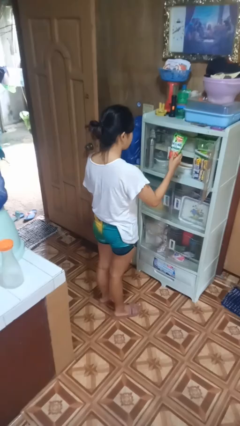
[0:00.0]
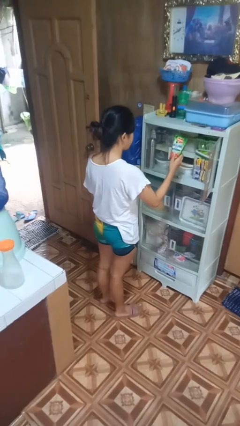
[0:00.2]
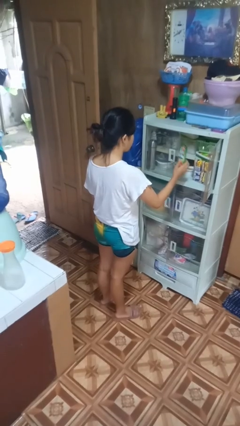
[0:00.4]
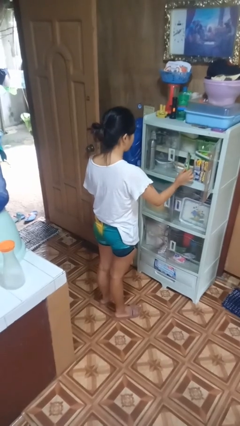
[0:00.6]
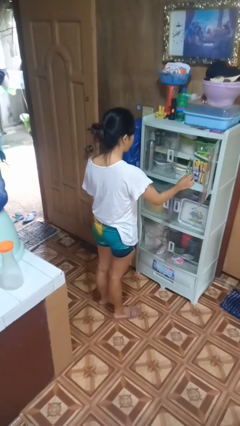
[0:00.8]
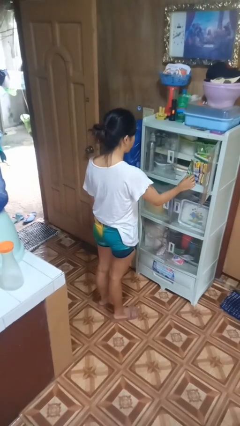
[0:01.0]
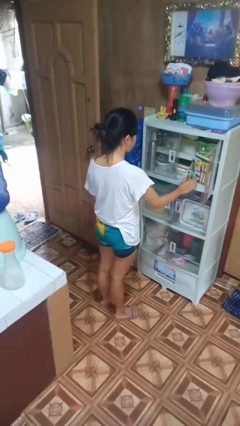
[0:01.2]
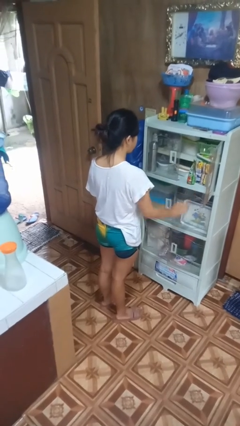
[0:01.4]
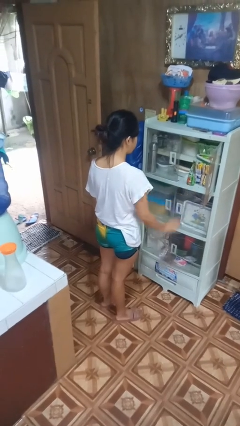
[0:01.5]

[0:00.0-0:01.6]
person puts down object into cabinet

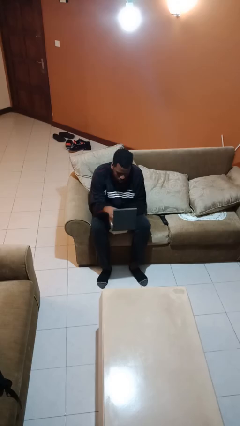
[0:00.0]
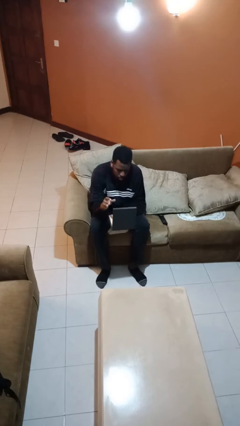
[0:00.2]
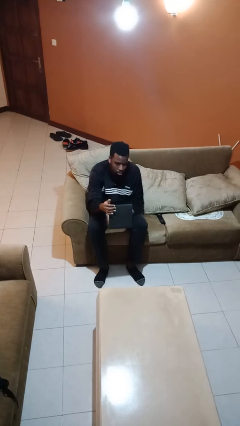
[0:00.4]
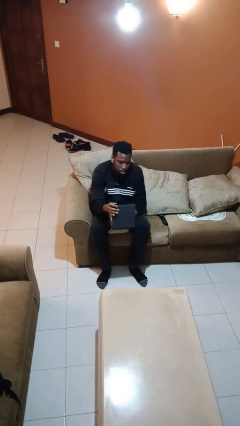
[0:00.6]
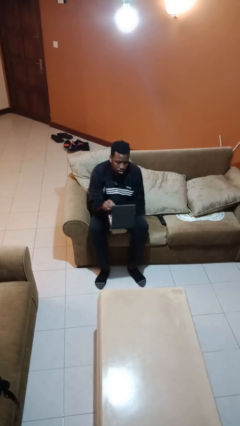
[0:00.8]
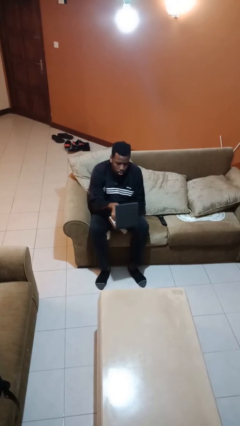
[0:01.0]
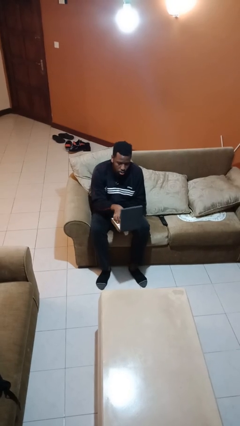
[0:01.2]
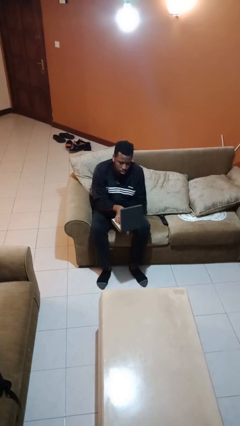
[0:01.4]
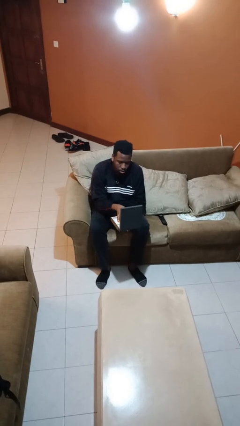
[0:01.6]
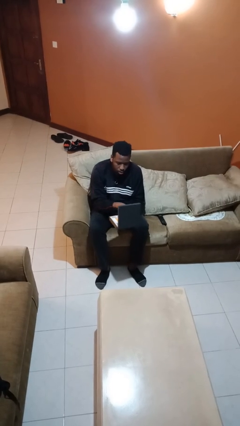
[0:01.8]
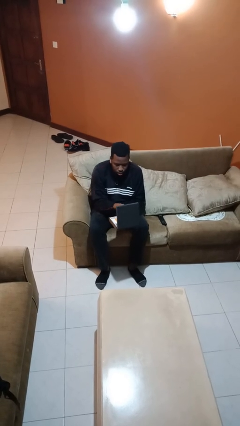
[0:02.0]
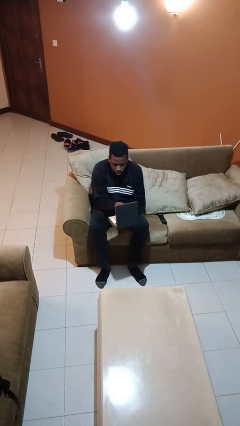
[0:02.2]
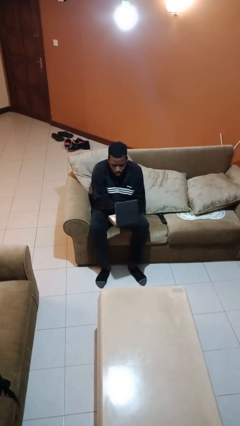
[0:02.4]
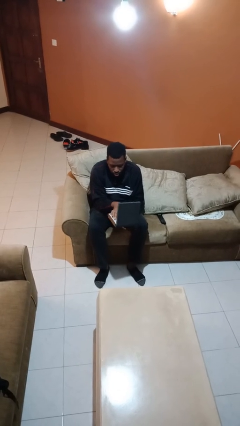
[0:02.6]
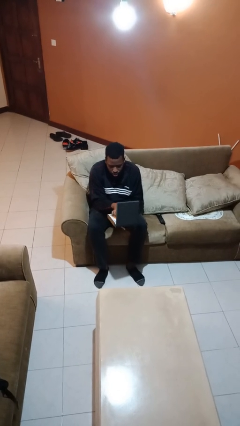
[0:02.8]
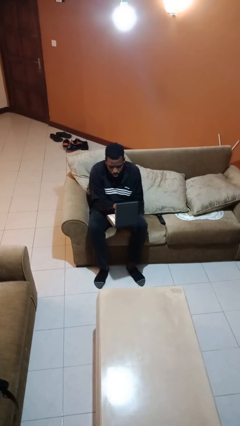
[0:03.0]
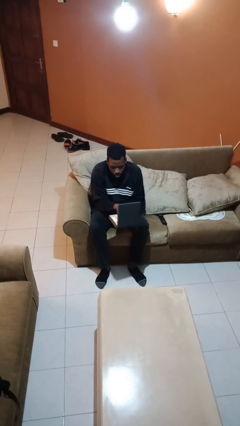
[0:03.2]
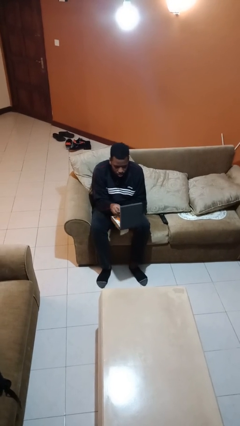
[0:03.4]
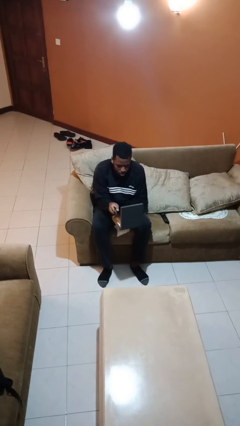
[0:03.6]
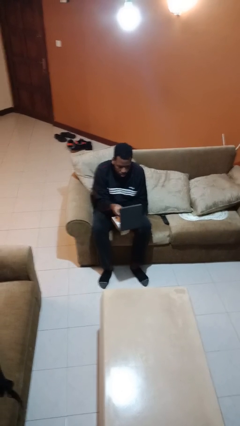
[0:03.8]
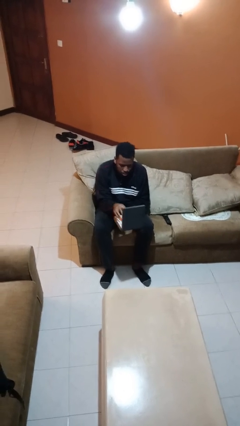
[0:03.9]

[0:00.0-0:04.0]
person searches jewelry box

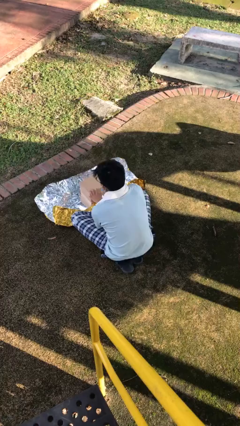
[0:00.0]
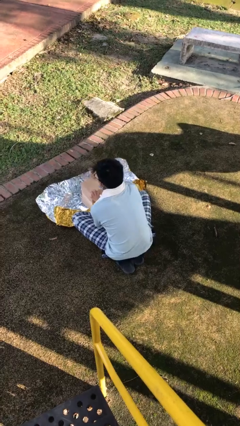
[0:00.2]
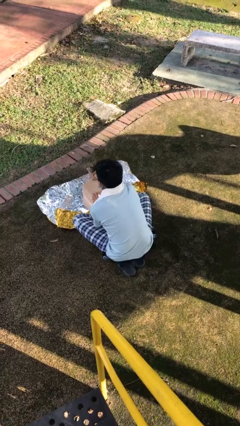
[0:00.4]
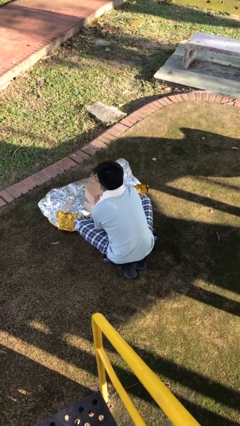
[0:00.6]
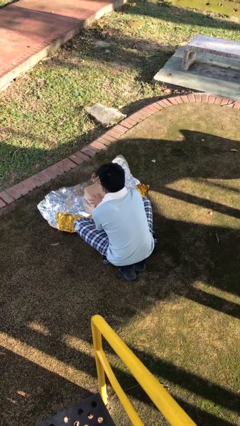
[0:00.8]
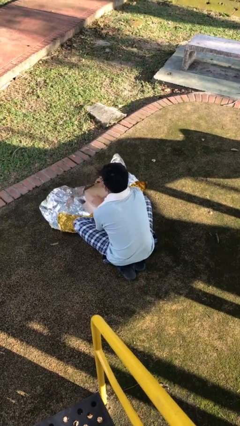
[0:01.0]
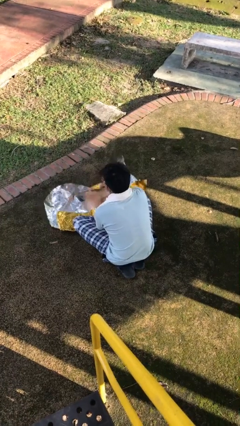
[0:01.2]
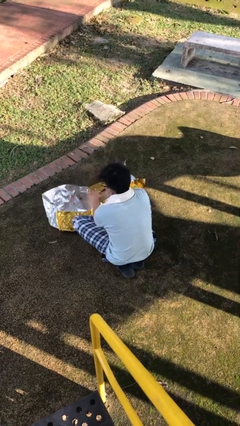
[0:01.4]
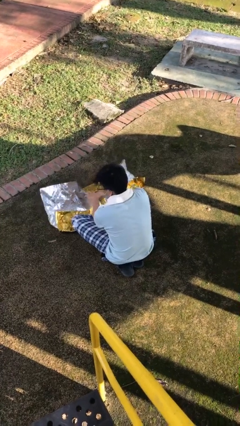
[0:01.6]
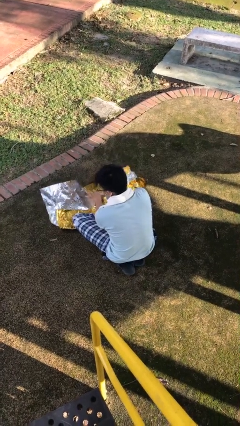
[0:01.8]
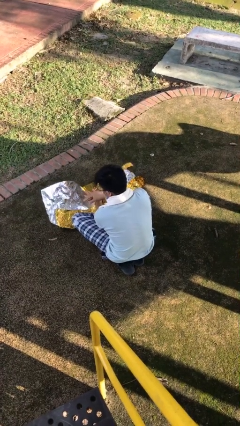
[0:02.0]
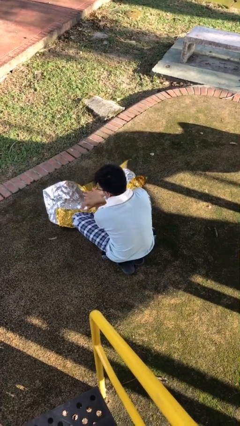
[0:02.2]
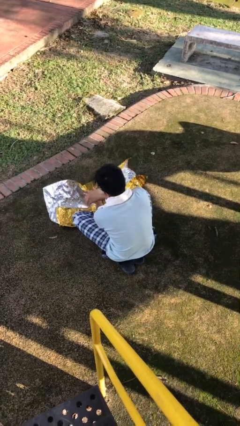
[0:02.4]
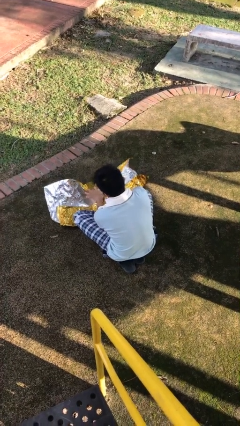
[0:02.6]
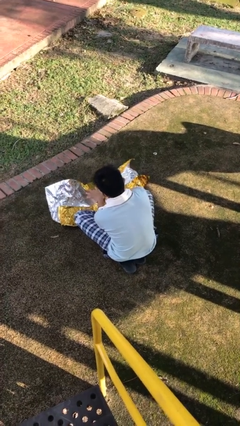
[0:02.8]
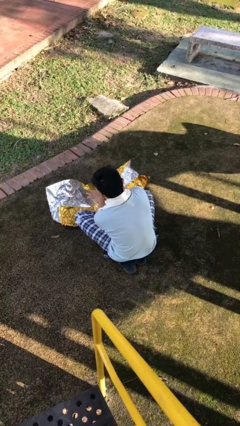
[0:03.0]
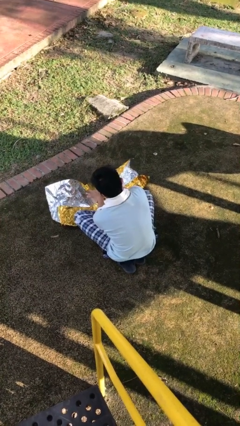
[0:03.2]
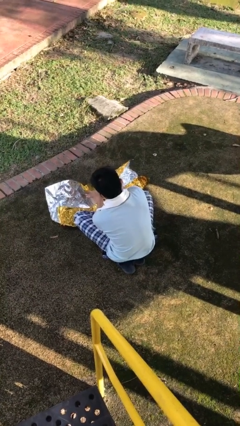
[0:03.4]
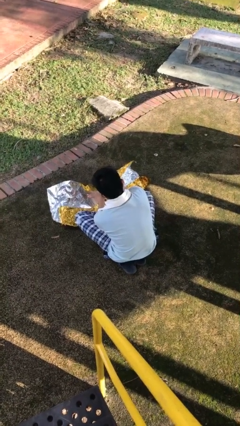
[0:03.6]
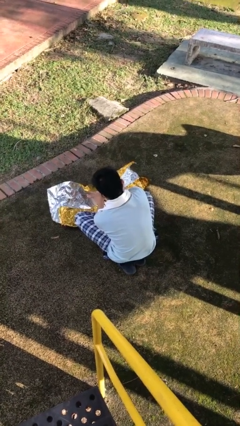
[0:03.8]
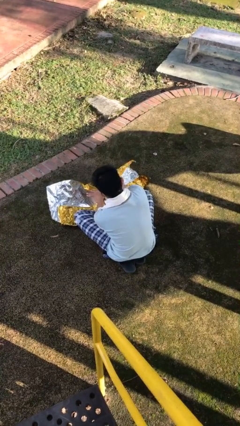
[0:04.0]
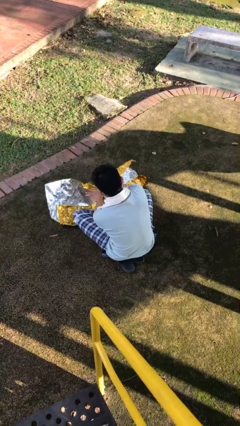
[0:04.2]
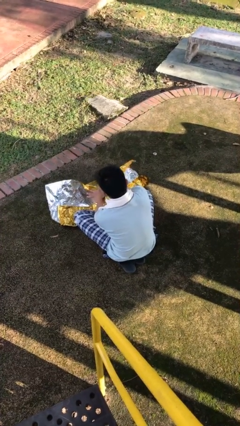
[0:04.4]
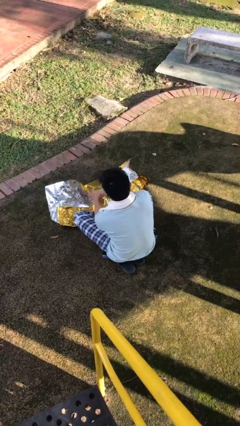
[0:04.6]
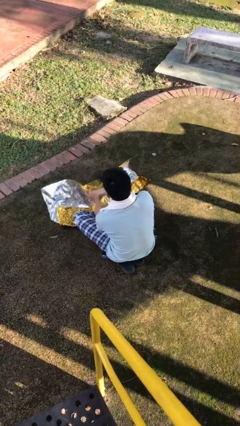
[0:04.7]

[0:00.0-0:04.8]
person wraps box

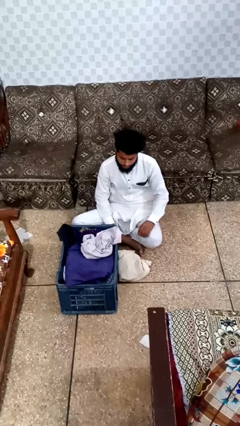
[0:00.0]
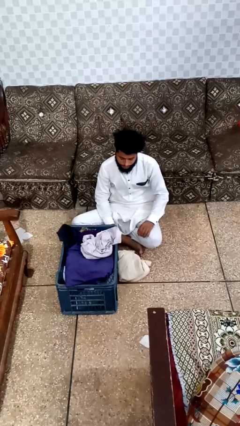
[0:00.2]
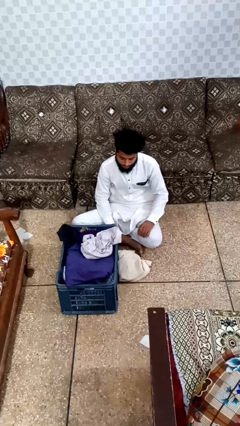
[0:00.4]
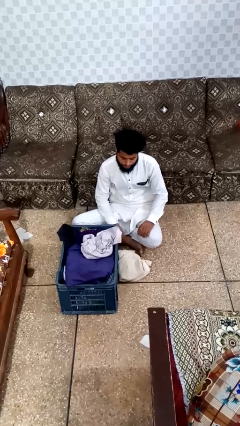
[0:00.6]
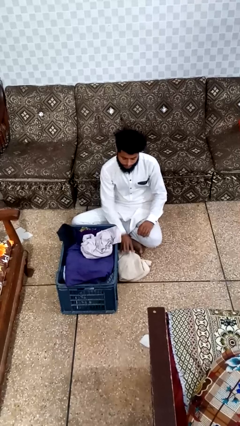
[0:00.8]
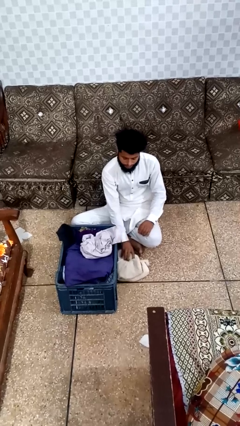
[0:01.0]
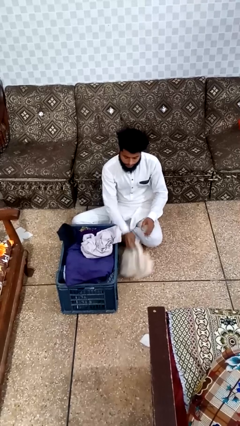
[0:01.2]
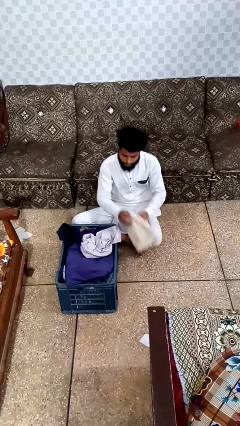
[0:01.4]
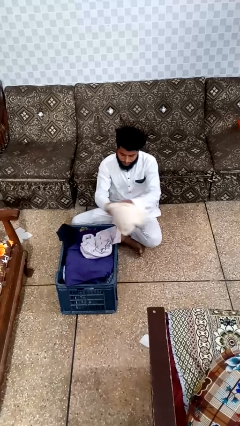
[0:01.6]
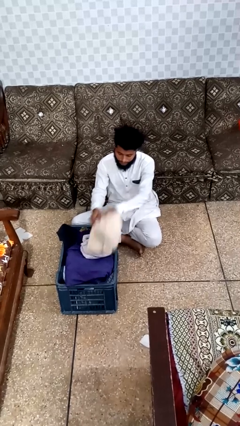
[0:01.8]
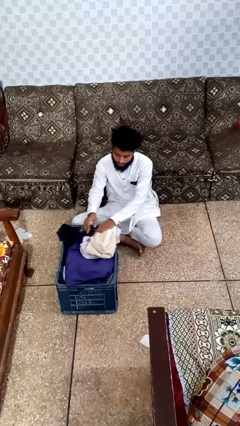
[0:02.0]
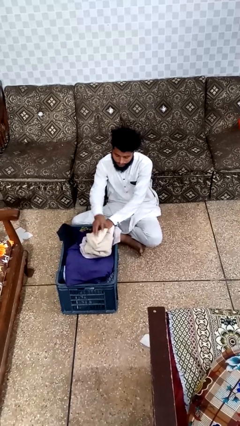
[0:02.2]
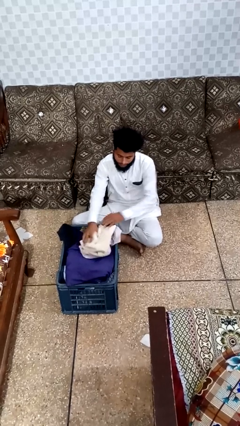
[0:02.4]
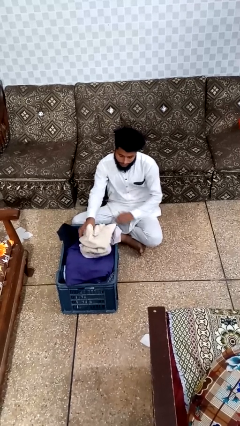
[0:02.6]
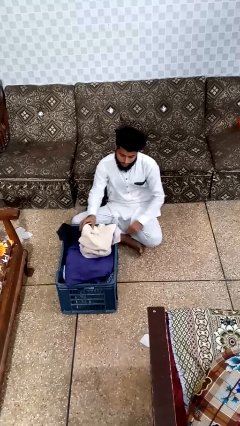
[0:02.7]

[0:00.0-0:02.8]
person takes object from basket

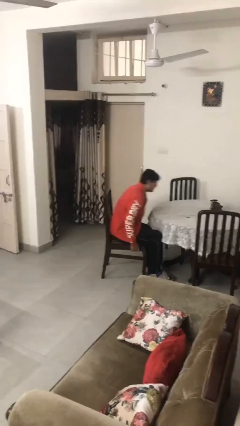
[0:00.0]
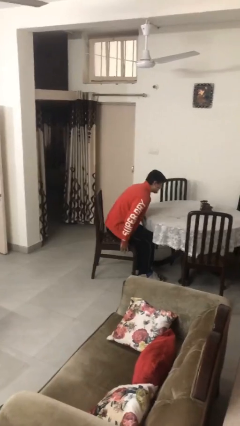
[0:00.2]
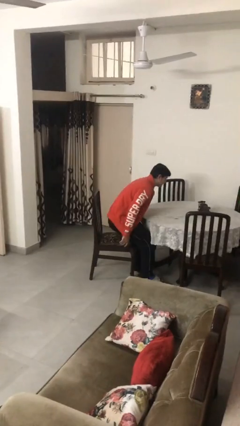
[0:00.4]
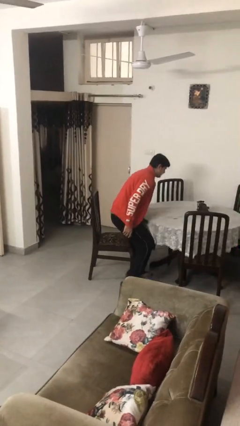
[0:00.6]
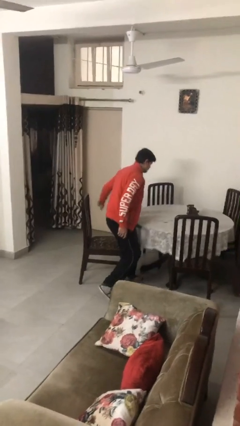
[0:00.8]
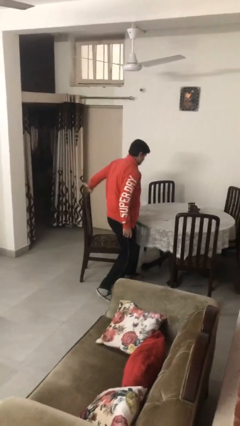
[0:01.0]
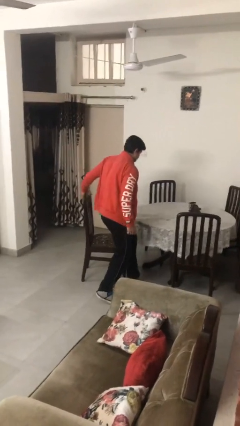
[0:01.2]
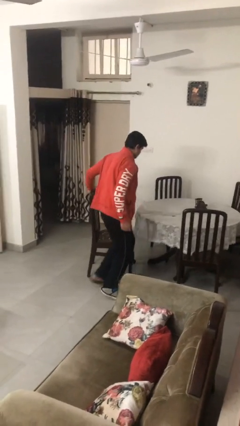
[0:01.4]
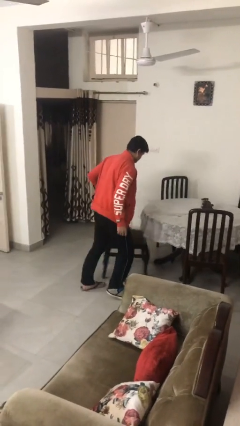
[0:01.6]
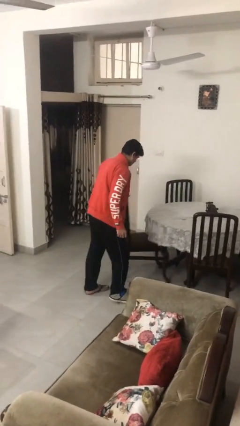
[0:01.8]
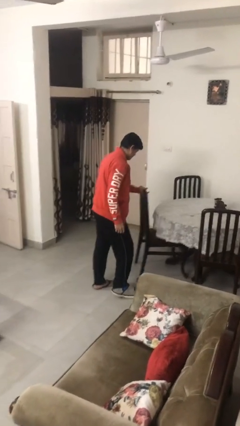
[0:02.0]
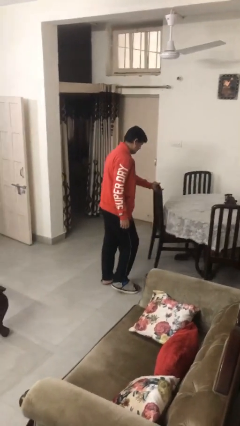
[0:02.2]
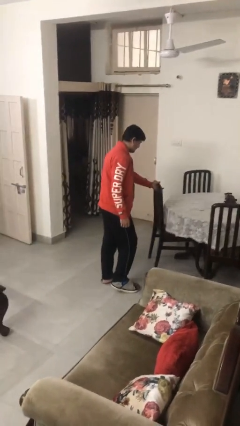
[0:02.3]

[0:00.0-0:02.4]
person stands up

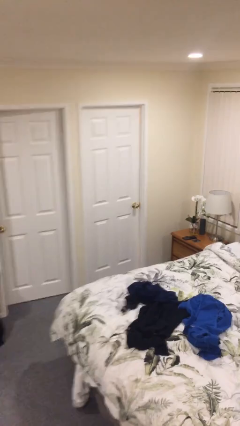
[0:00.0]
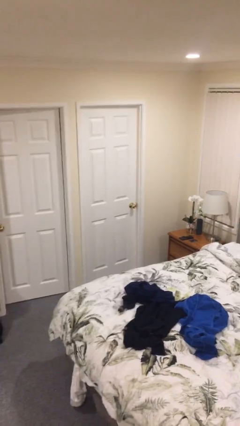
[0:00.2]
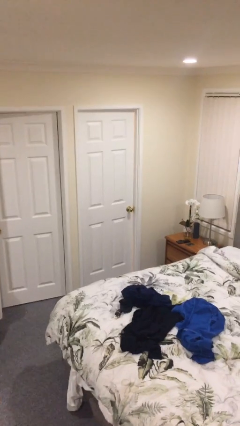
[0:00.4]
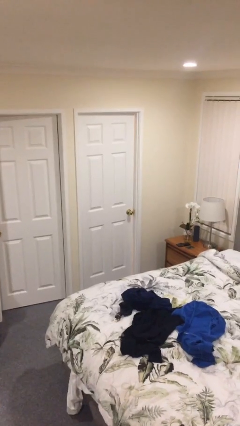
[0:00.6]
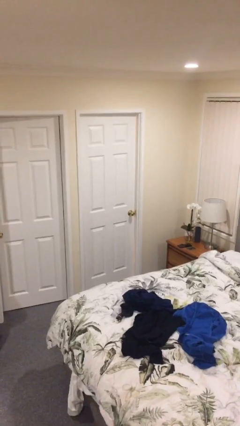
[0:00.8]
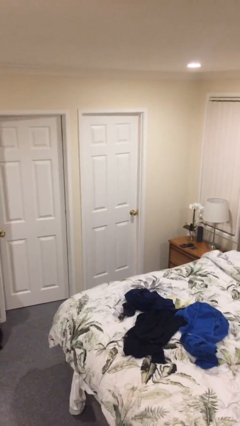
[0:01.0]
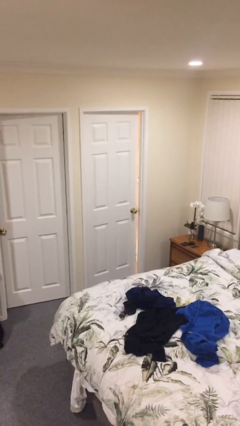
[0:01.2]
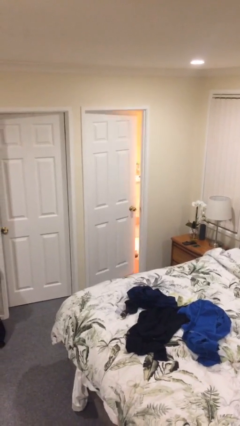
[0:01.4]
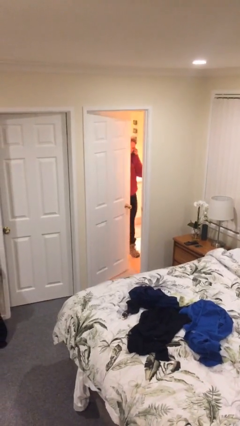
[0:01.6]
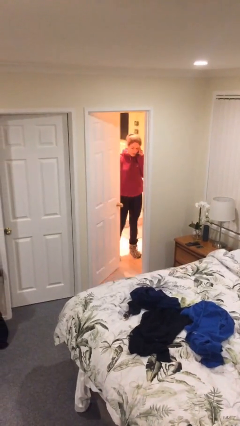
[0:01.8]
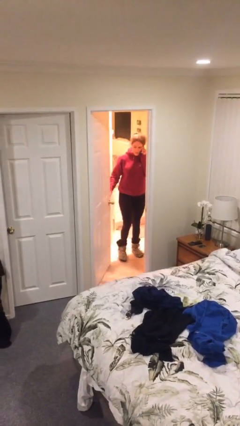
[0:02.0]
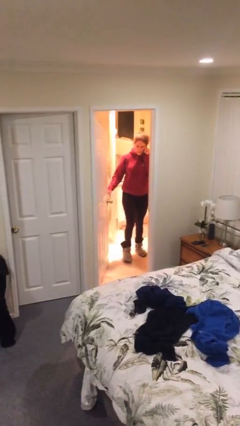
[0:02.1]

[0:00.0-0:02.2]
person opens facility door
